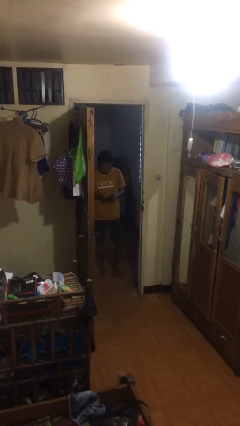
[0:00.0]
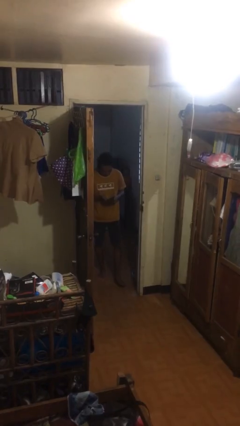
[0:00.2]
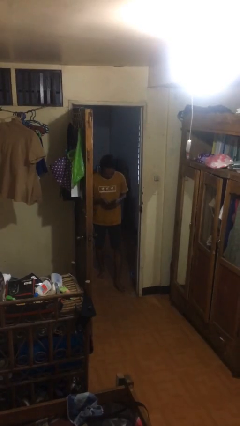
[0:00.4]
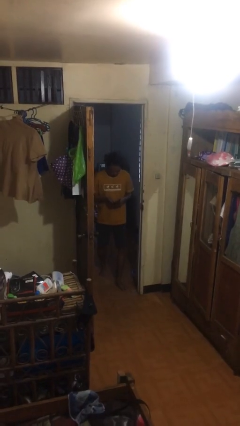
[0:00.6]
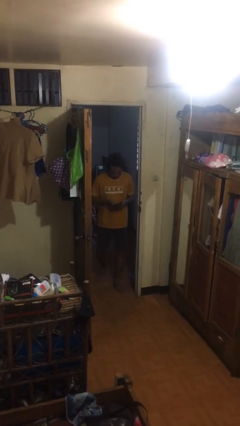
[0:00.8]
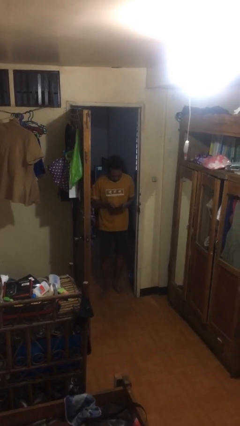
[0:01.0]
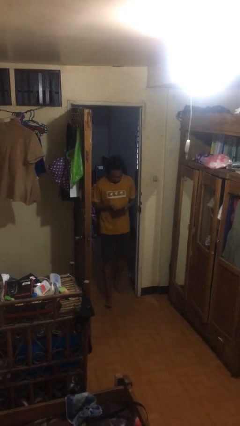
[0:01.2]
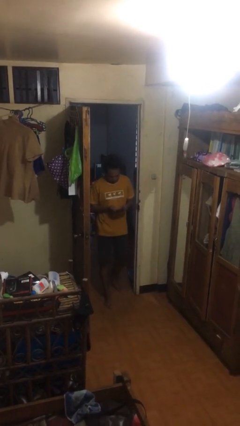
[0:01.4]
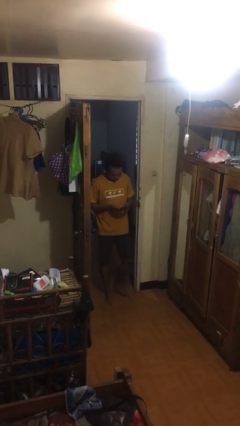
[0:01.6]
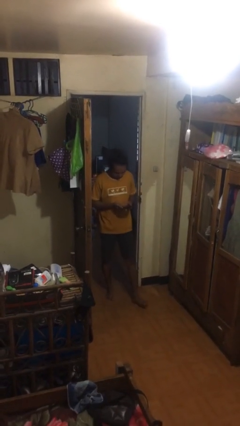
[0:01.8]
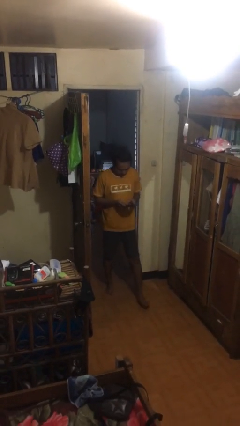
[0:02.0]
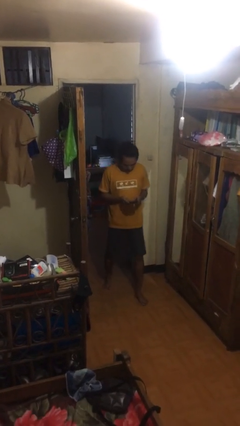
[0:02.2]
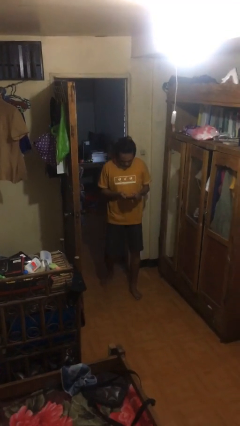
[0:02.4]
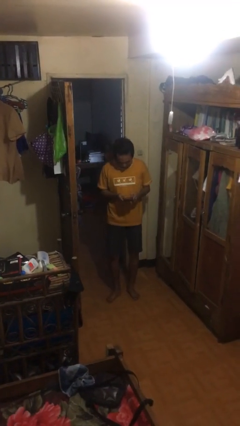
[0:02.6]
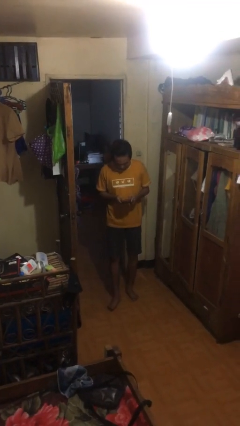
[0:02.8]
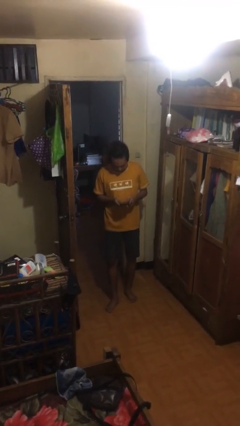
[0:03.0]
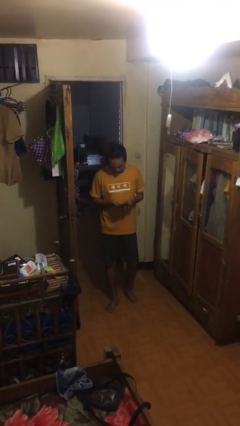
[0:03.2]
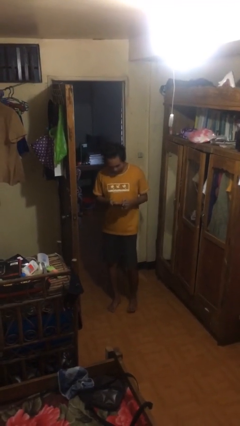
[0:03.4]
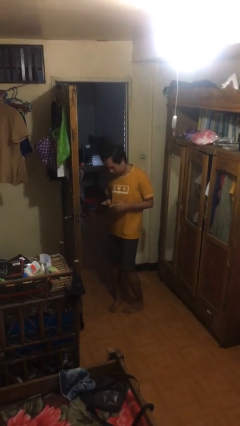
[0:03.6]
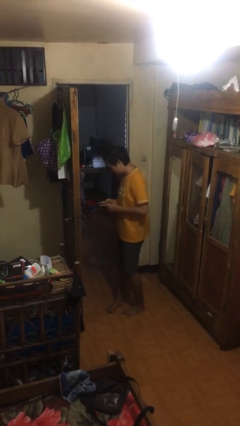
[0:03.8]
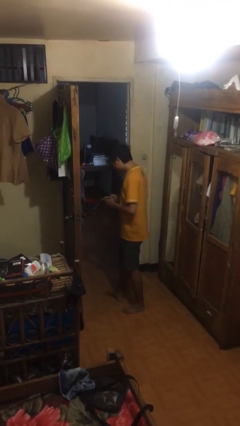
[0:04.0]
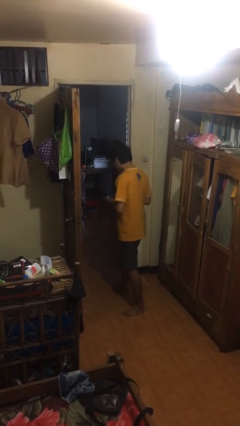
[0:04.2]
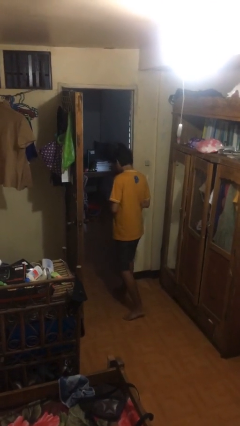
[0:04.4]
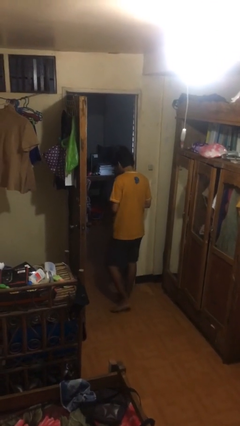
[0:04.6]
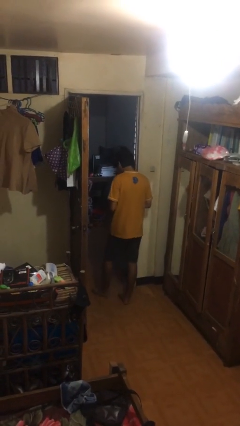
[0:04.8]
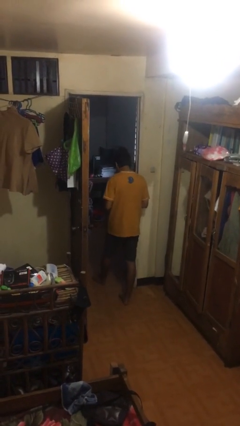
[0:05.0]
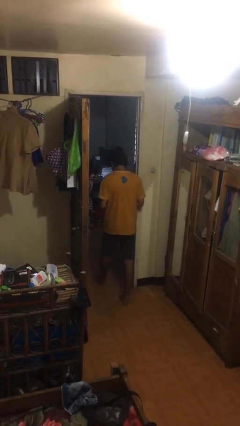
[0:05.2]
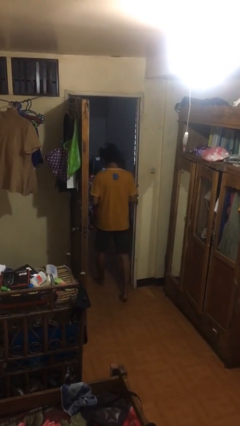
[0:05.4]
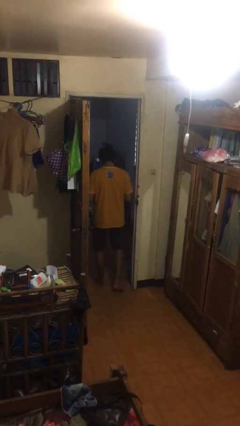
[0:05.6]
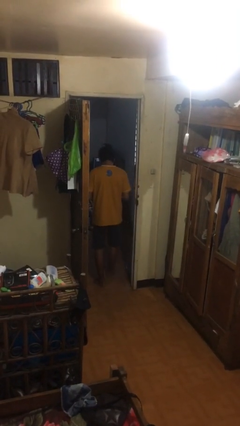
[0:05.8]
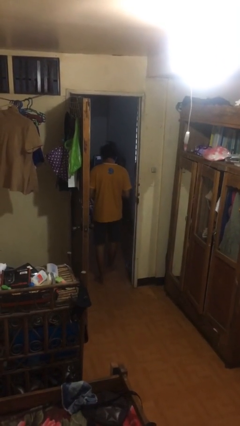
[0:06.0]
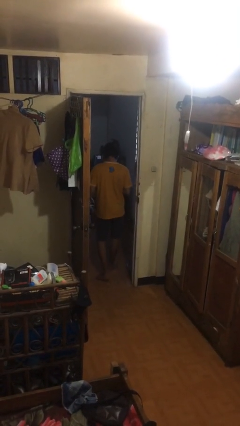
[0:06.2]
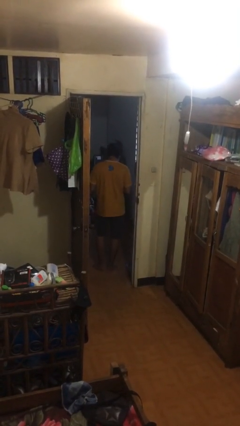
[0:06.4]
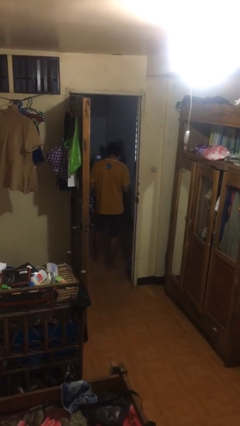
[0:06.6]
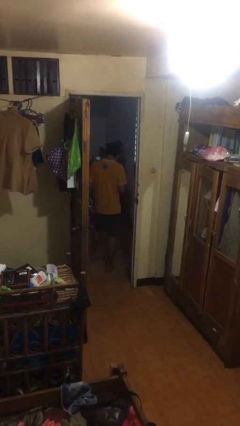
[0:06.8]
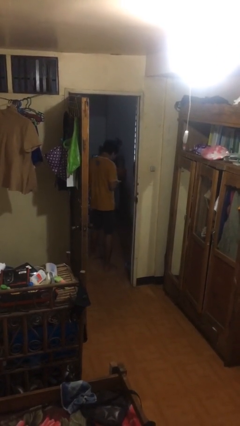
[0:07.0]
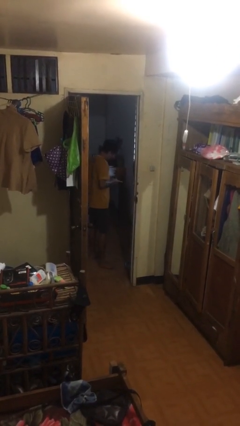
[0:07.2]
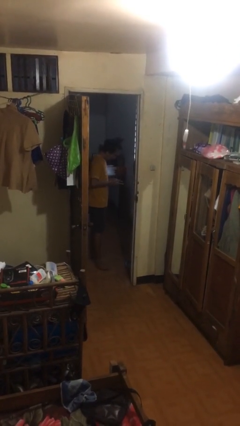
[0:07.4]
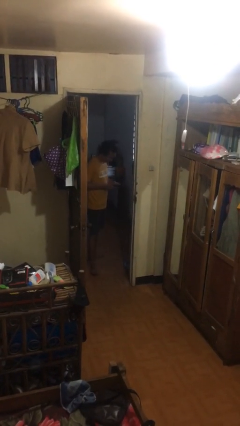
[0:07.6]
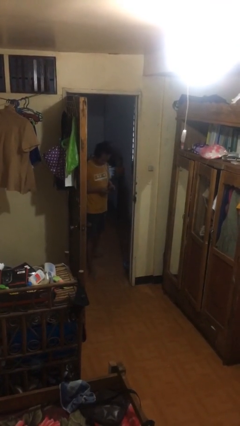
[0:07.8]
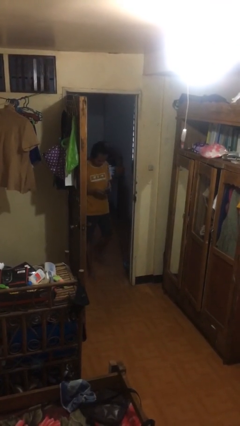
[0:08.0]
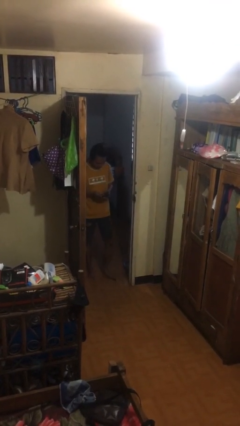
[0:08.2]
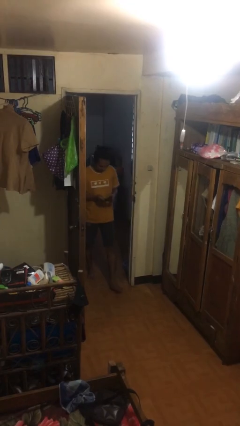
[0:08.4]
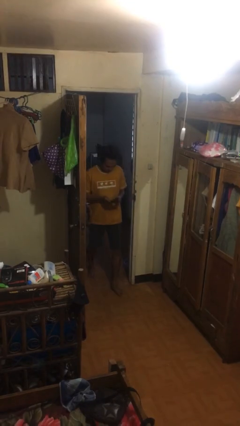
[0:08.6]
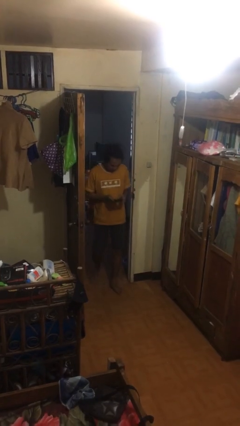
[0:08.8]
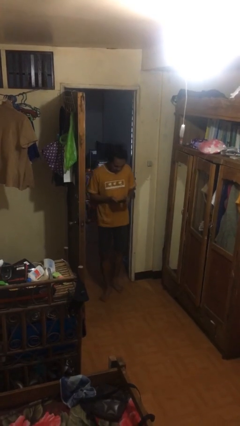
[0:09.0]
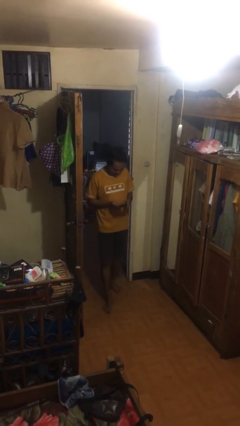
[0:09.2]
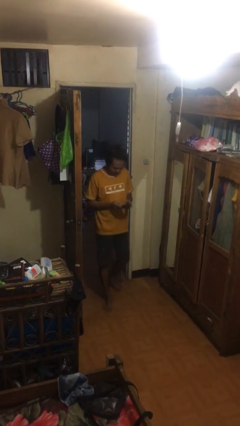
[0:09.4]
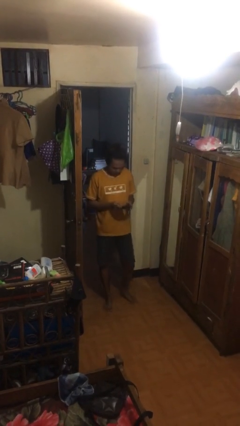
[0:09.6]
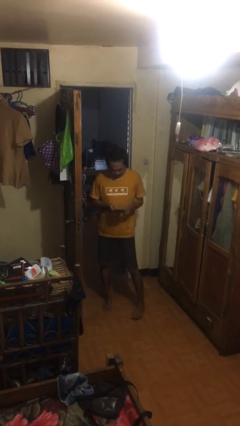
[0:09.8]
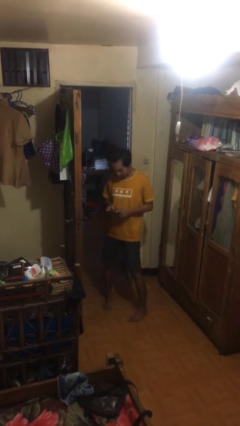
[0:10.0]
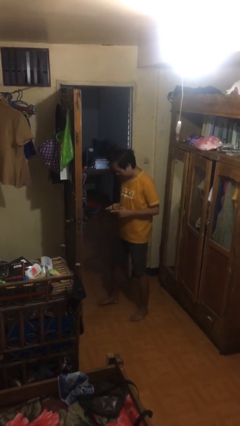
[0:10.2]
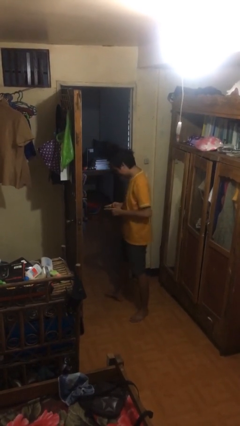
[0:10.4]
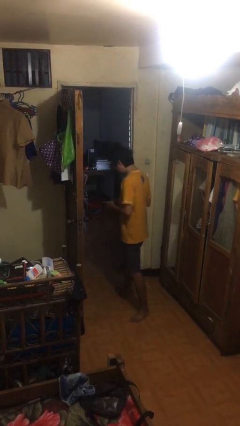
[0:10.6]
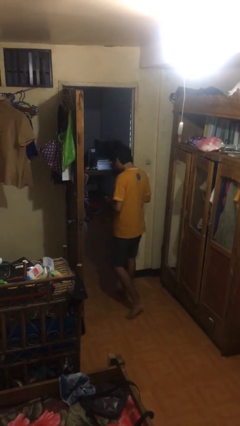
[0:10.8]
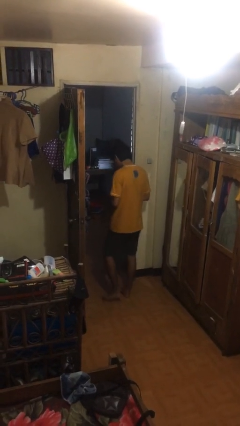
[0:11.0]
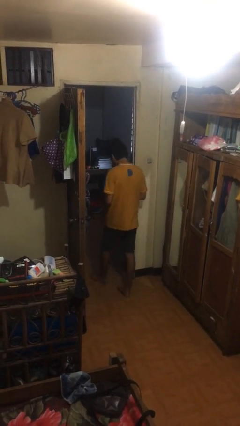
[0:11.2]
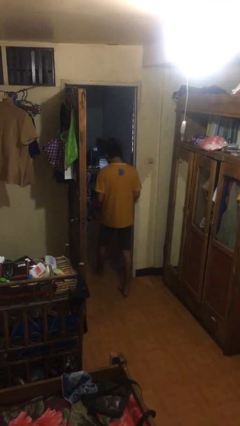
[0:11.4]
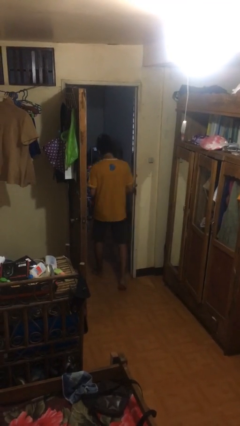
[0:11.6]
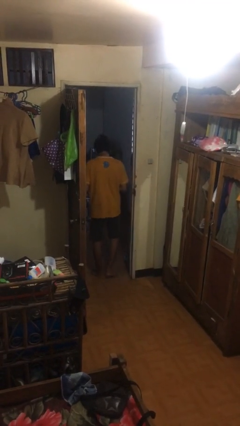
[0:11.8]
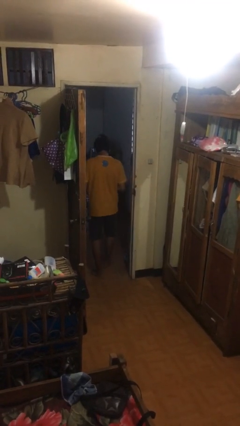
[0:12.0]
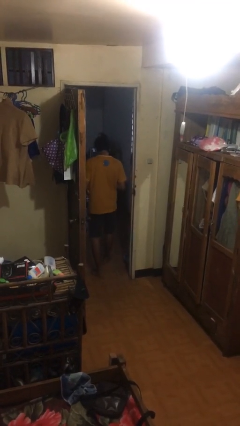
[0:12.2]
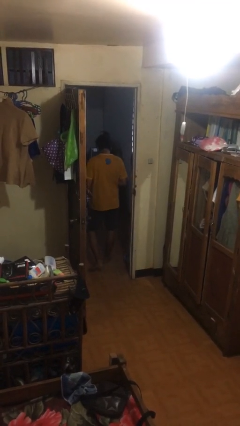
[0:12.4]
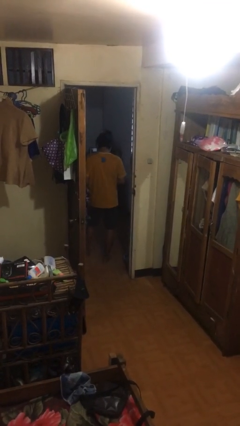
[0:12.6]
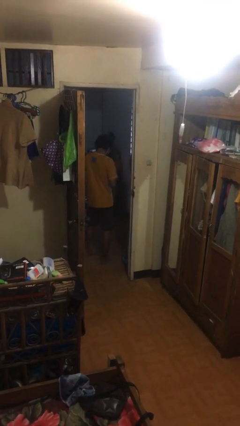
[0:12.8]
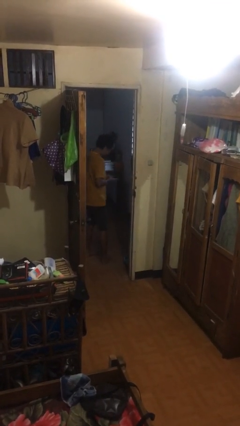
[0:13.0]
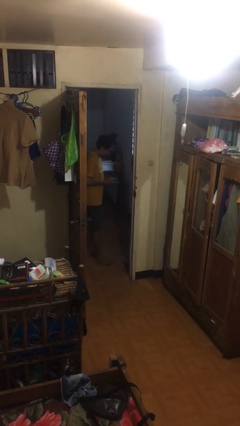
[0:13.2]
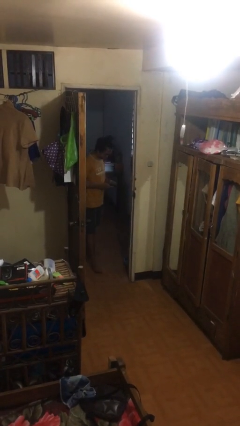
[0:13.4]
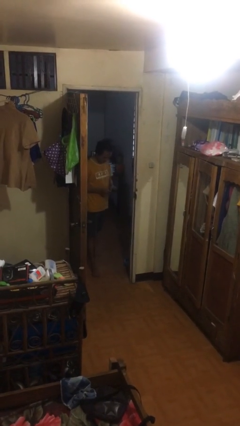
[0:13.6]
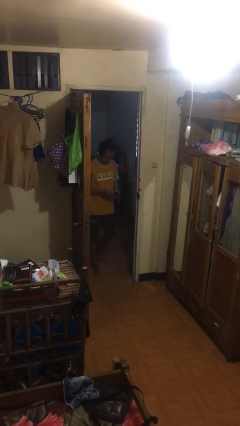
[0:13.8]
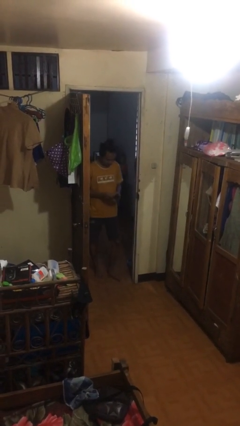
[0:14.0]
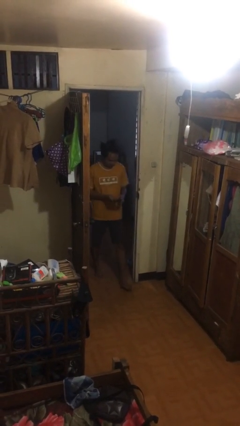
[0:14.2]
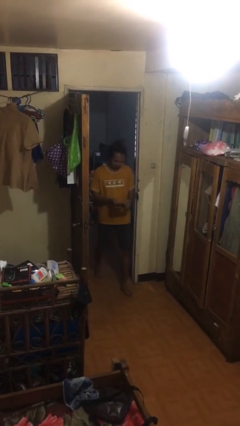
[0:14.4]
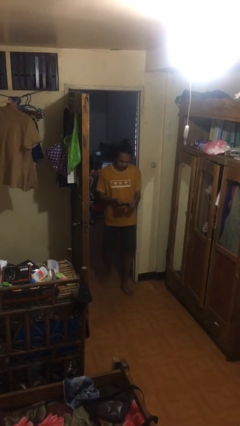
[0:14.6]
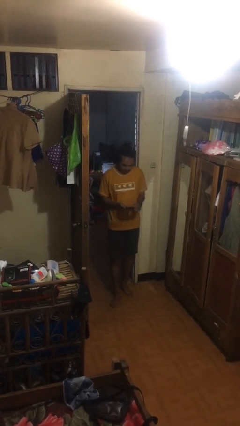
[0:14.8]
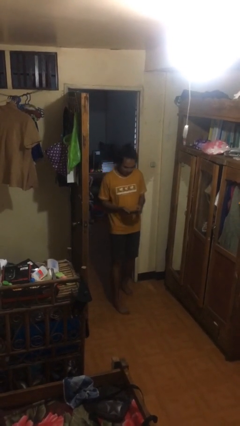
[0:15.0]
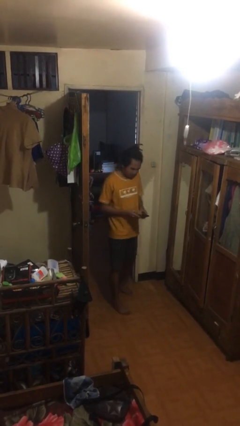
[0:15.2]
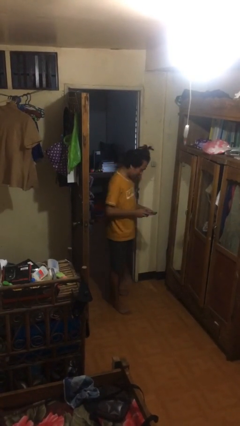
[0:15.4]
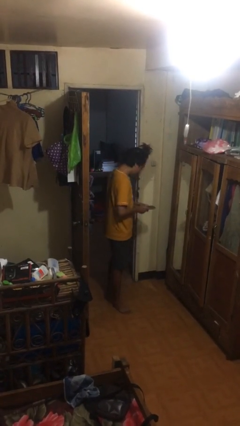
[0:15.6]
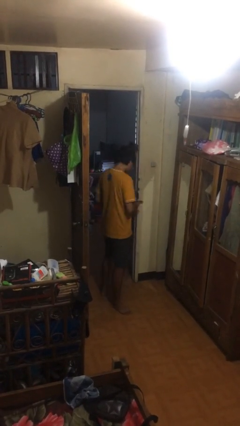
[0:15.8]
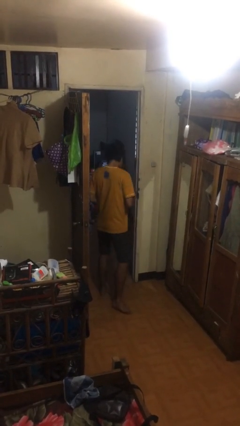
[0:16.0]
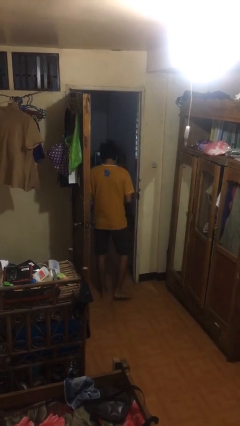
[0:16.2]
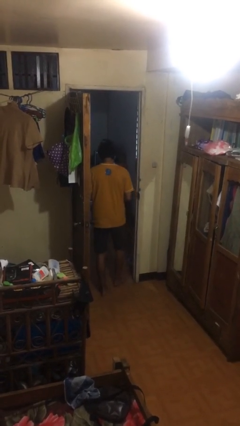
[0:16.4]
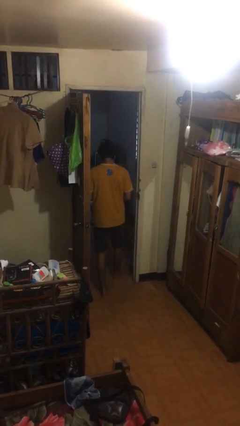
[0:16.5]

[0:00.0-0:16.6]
person texts on phone

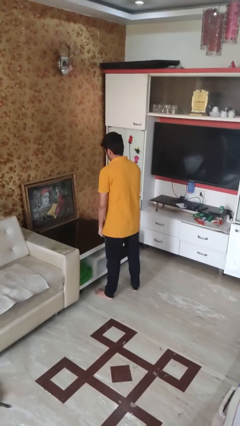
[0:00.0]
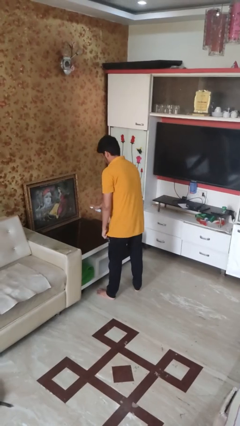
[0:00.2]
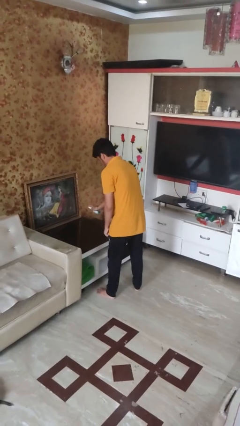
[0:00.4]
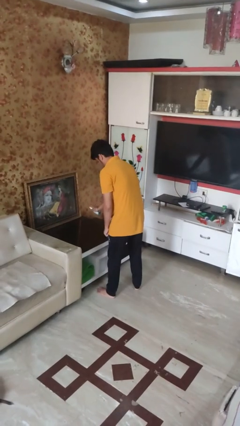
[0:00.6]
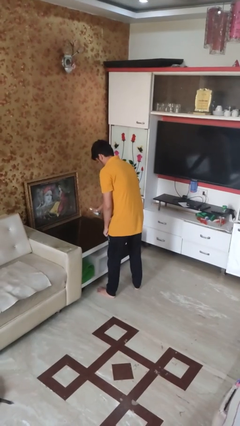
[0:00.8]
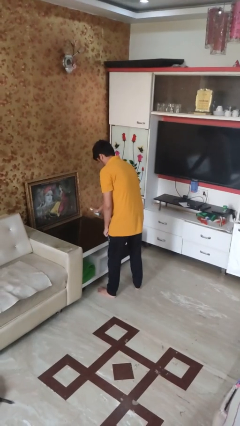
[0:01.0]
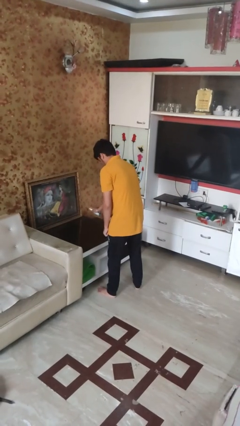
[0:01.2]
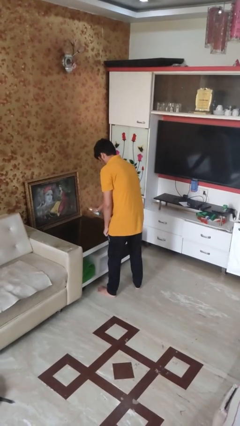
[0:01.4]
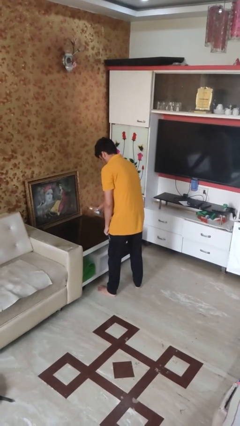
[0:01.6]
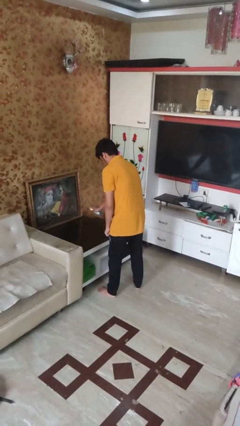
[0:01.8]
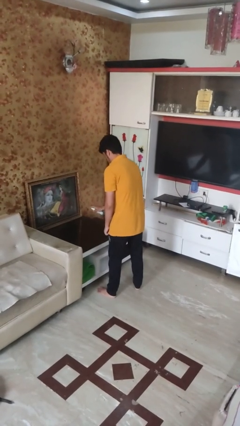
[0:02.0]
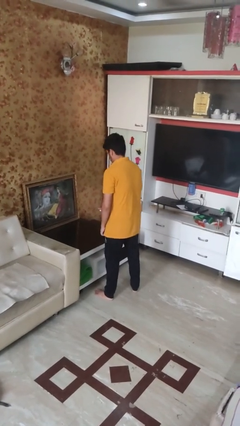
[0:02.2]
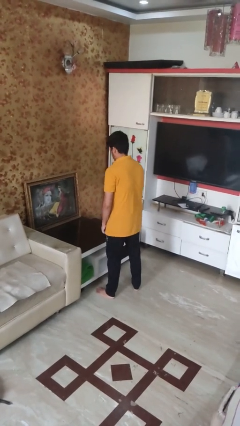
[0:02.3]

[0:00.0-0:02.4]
person sprays from bottle
